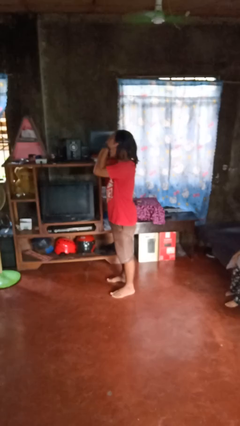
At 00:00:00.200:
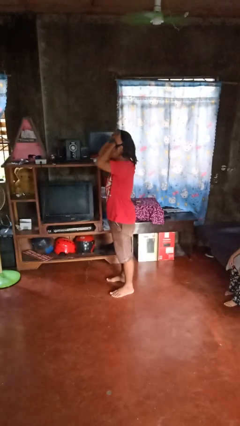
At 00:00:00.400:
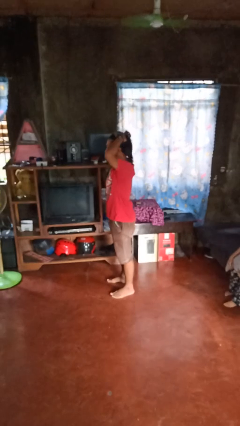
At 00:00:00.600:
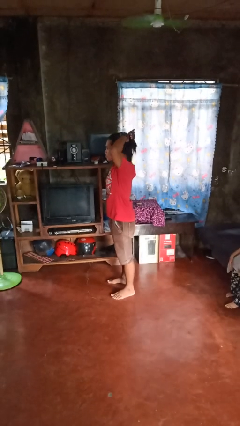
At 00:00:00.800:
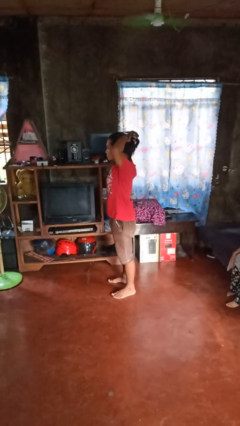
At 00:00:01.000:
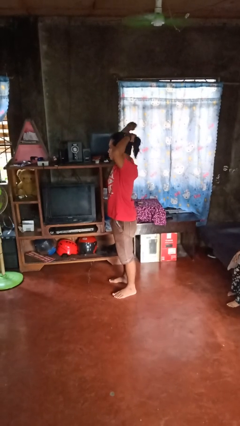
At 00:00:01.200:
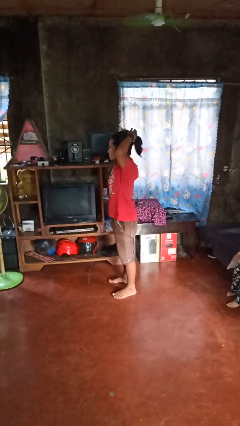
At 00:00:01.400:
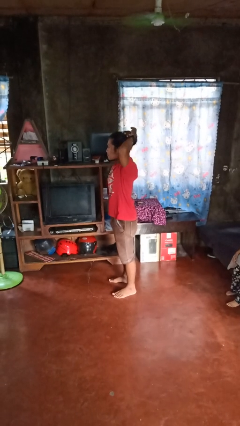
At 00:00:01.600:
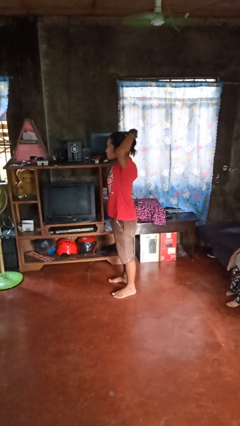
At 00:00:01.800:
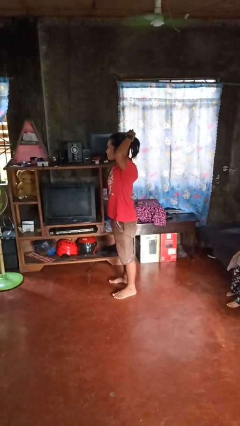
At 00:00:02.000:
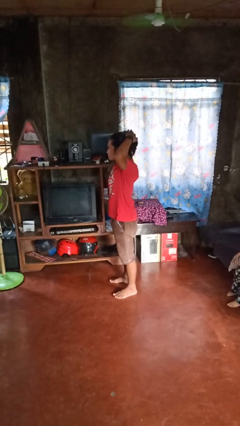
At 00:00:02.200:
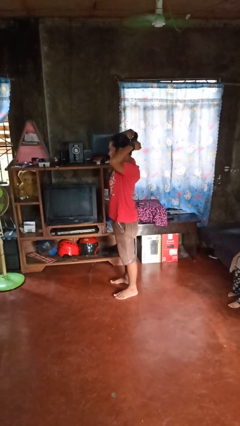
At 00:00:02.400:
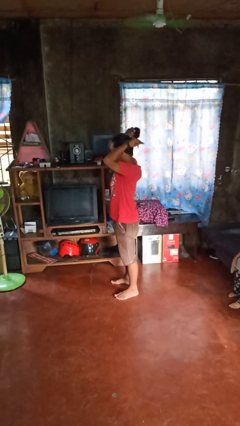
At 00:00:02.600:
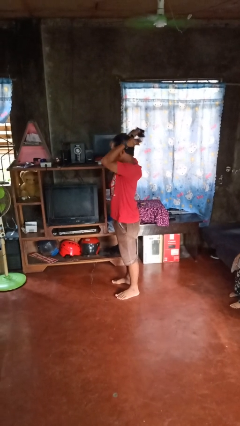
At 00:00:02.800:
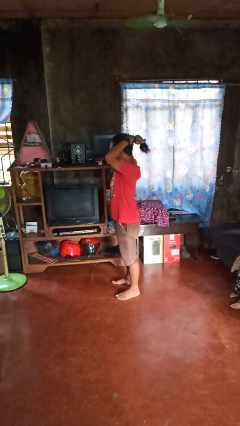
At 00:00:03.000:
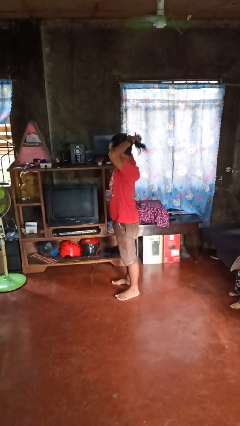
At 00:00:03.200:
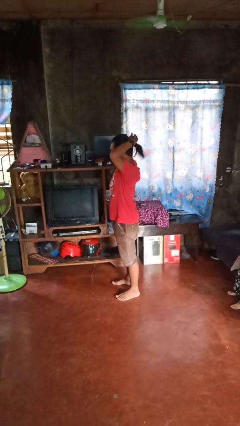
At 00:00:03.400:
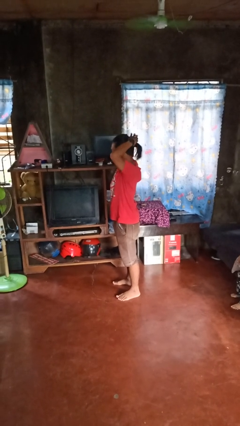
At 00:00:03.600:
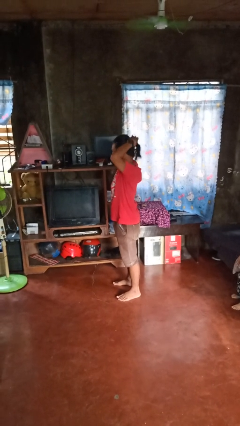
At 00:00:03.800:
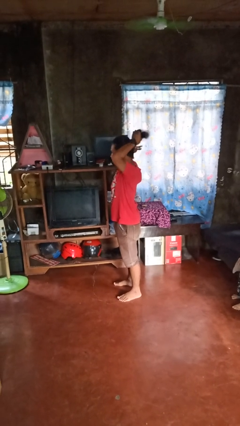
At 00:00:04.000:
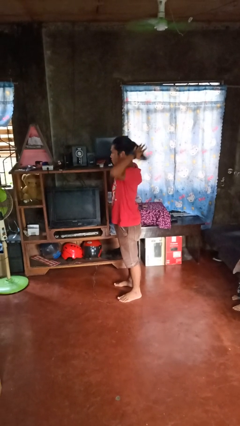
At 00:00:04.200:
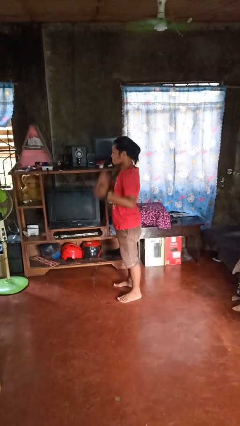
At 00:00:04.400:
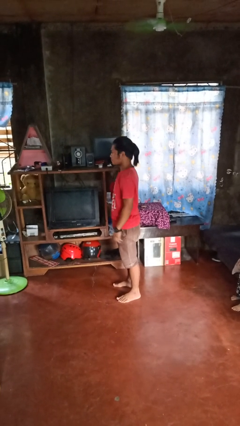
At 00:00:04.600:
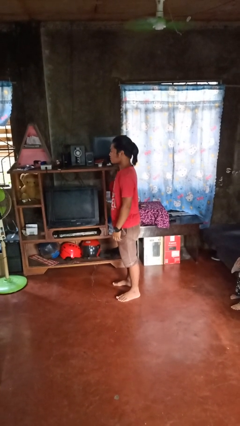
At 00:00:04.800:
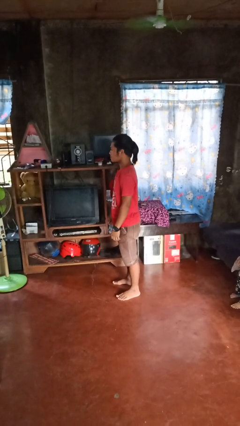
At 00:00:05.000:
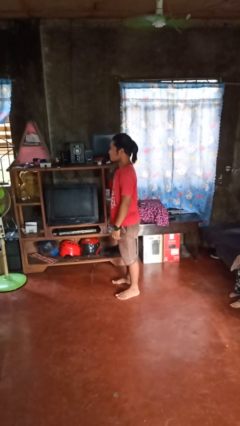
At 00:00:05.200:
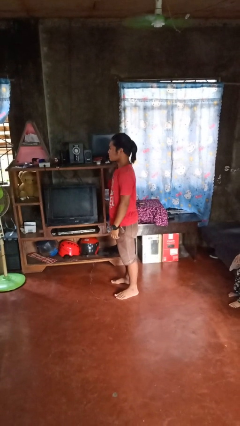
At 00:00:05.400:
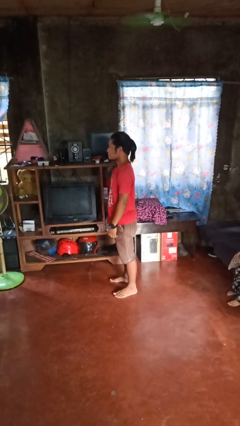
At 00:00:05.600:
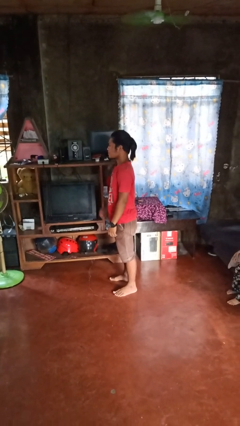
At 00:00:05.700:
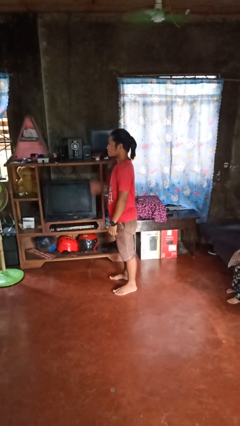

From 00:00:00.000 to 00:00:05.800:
person puts hair in ponytail

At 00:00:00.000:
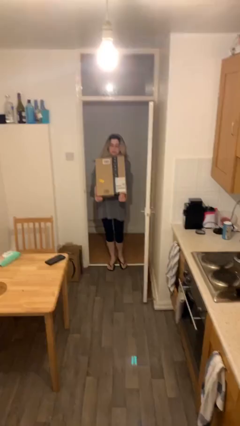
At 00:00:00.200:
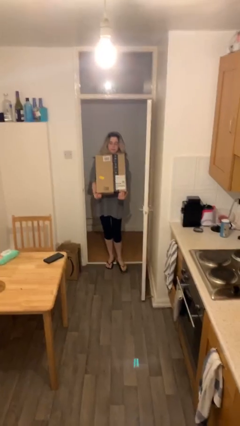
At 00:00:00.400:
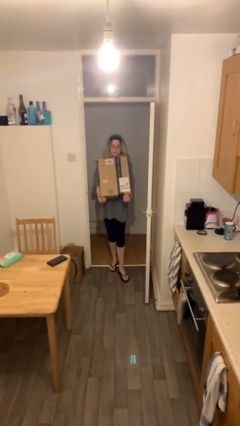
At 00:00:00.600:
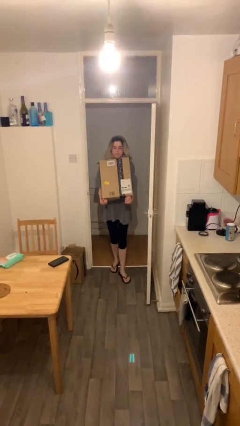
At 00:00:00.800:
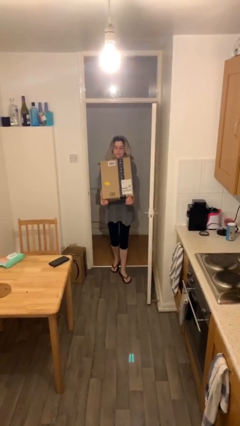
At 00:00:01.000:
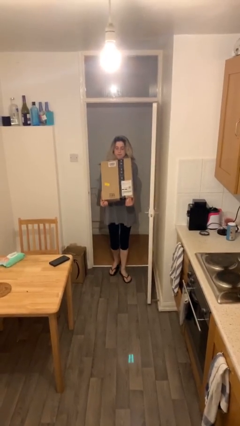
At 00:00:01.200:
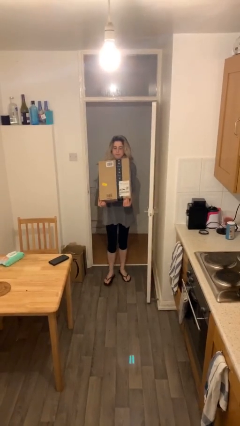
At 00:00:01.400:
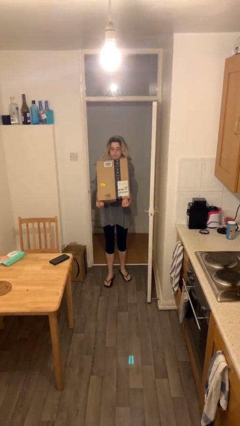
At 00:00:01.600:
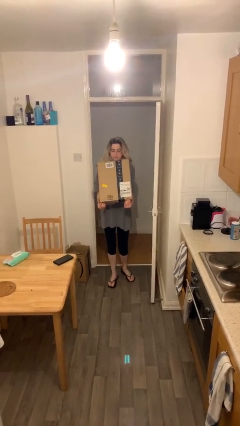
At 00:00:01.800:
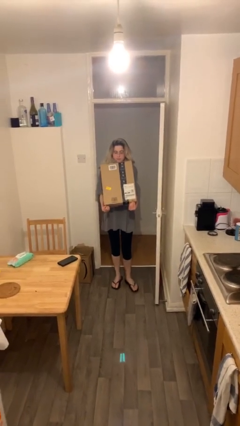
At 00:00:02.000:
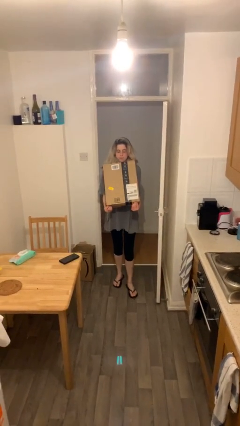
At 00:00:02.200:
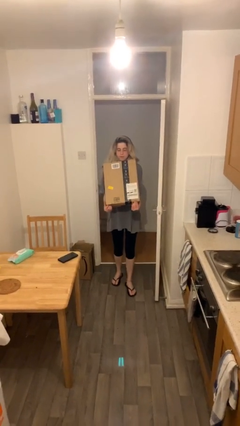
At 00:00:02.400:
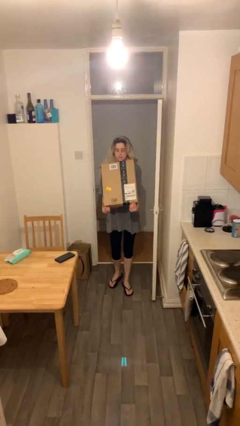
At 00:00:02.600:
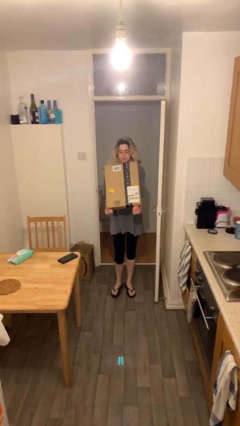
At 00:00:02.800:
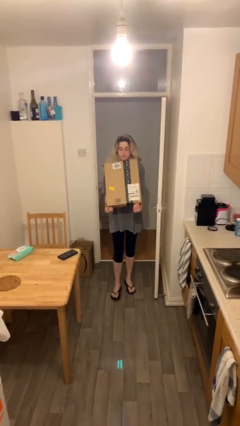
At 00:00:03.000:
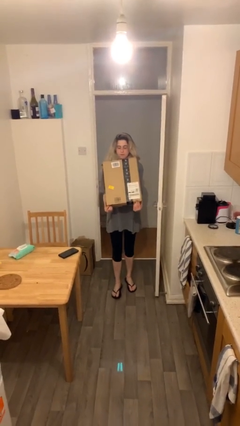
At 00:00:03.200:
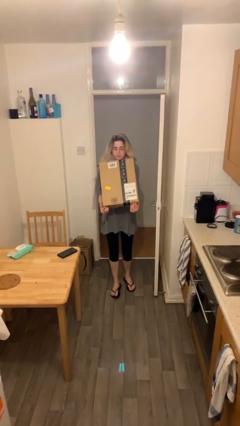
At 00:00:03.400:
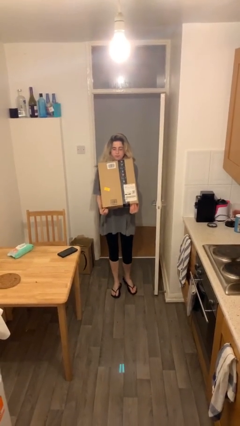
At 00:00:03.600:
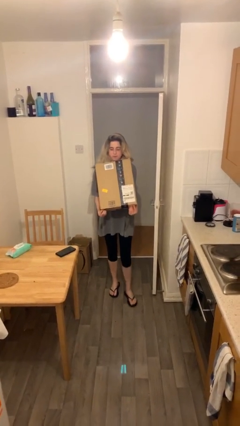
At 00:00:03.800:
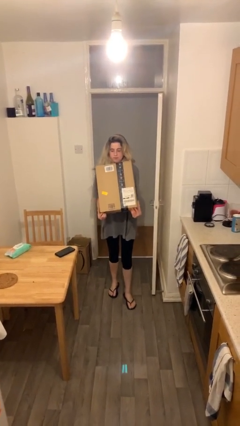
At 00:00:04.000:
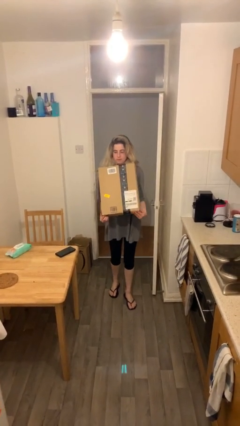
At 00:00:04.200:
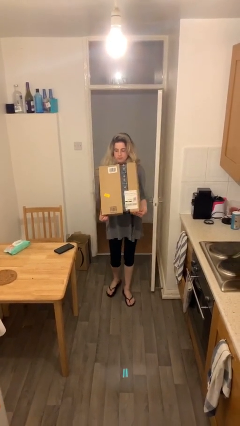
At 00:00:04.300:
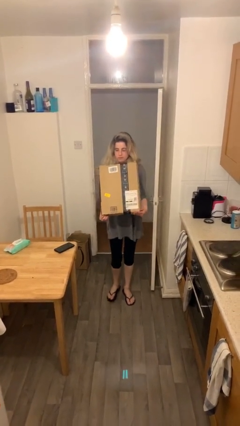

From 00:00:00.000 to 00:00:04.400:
person carries heavy object

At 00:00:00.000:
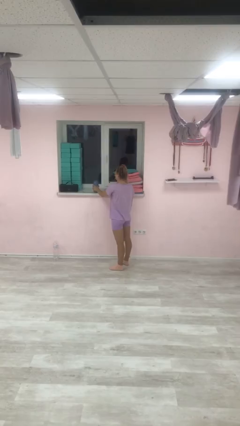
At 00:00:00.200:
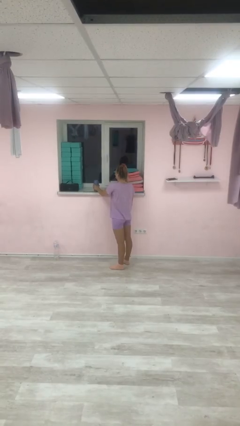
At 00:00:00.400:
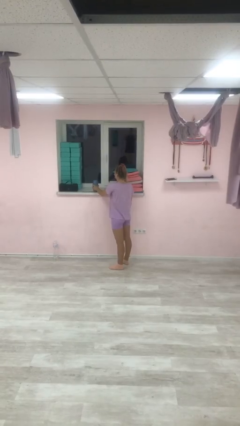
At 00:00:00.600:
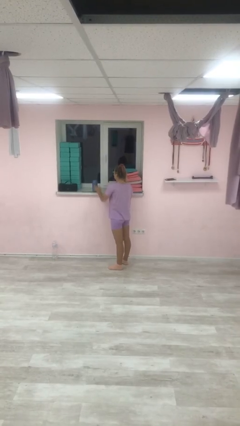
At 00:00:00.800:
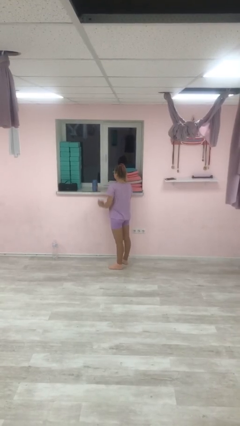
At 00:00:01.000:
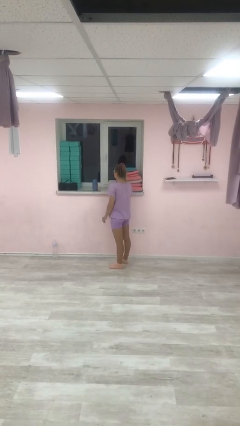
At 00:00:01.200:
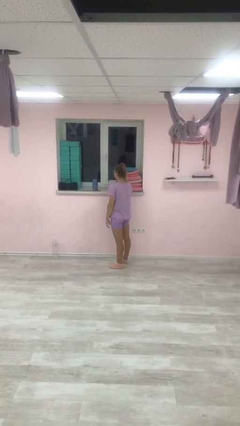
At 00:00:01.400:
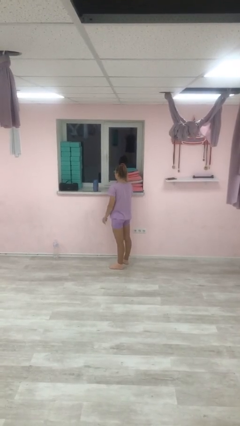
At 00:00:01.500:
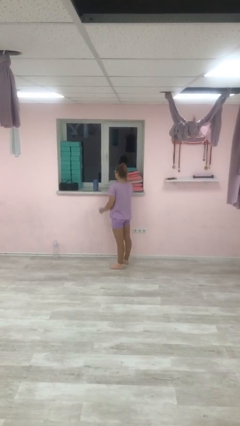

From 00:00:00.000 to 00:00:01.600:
person puts down object on countertop

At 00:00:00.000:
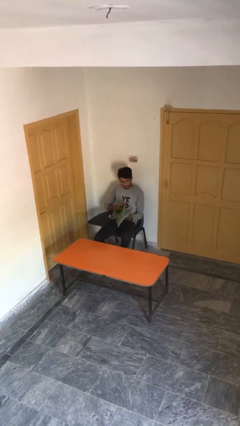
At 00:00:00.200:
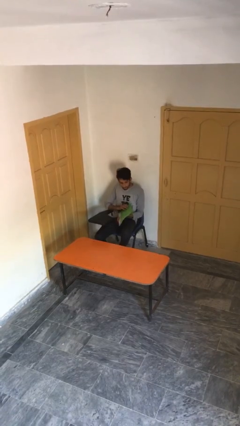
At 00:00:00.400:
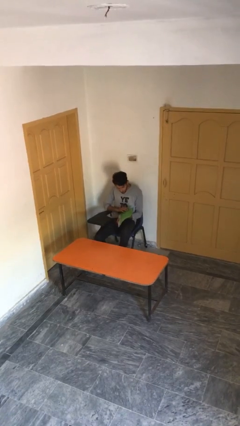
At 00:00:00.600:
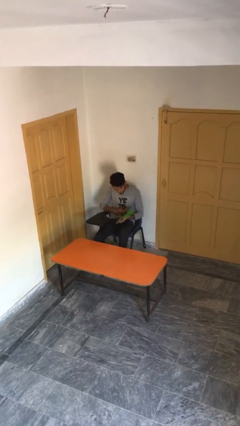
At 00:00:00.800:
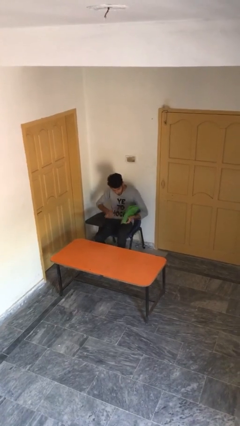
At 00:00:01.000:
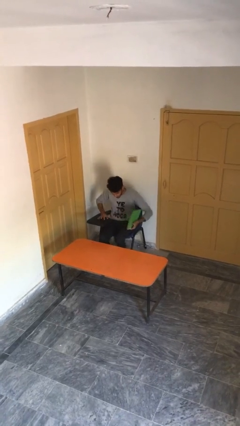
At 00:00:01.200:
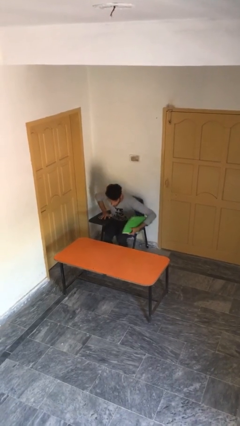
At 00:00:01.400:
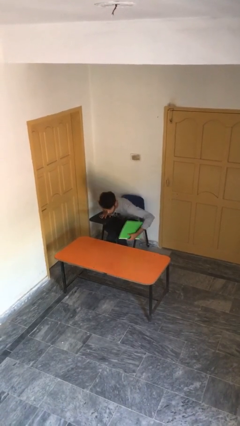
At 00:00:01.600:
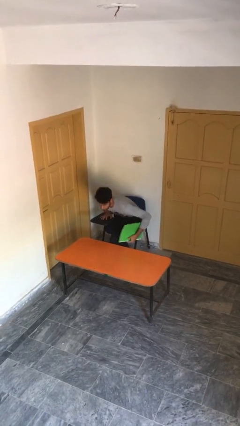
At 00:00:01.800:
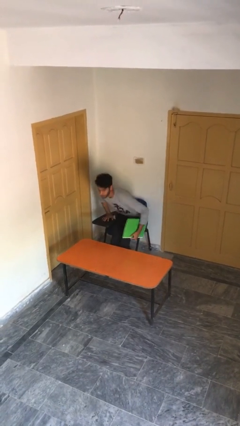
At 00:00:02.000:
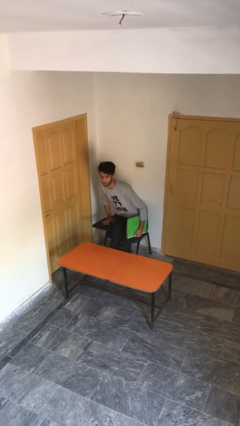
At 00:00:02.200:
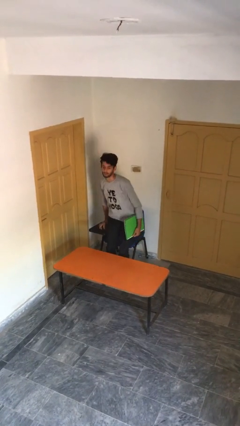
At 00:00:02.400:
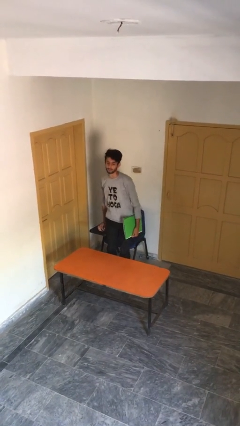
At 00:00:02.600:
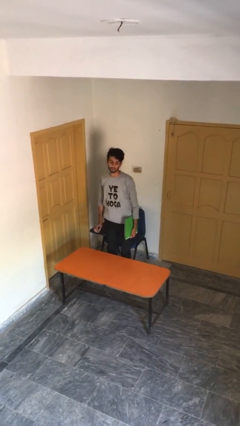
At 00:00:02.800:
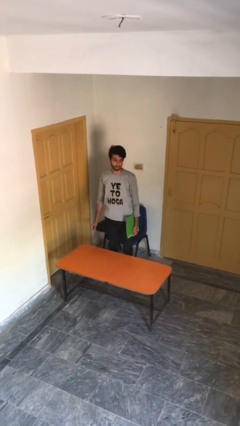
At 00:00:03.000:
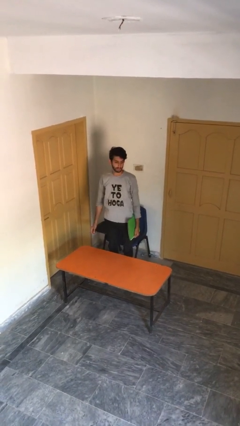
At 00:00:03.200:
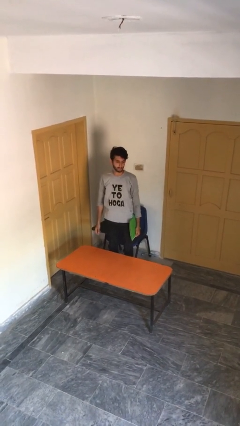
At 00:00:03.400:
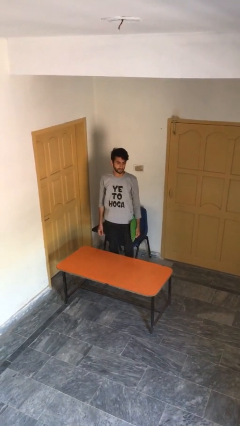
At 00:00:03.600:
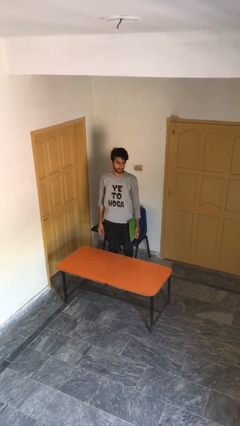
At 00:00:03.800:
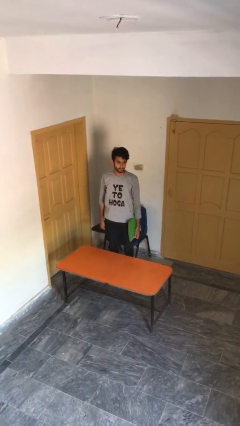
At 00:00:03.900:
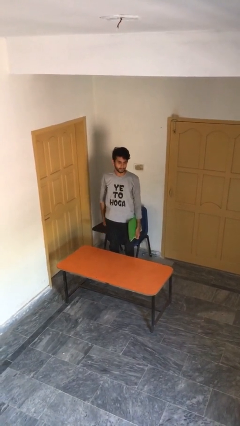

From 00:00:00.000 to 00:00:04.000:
person stands up

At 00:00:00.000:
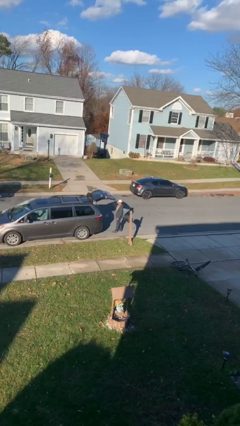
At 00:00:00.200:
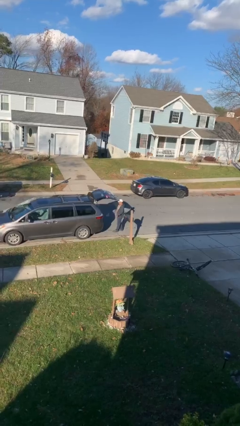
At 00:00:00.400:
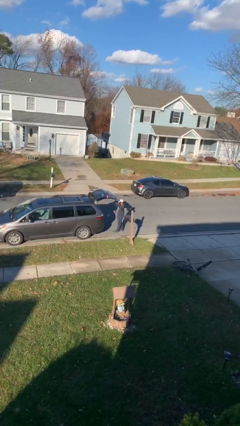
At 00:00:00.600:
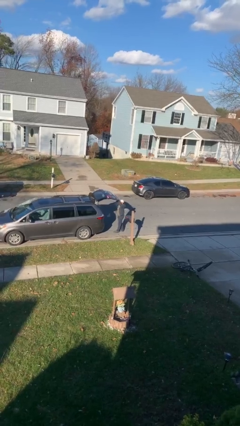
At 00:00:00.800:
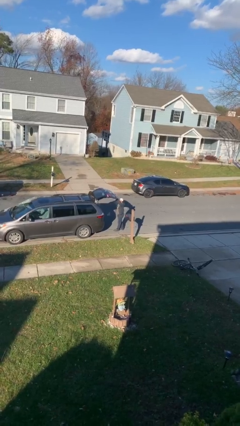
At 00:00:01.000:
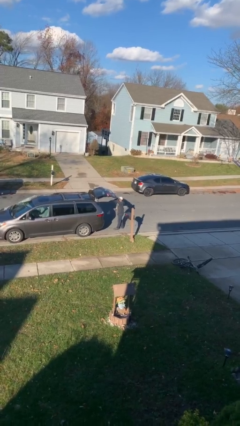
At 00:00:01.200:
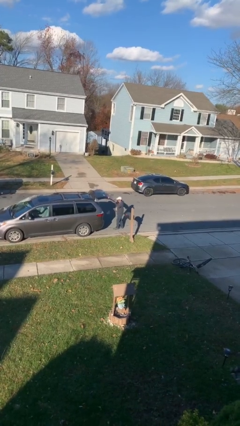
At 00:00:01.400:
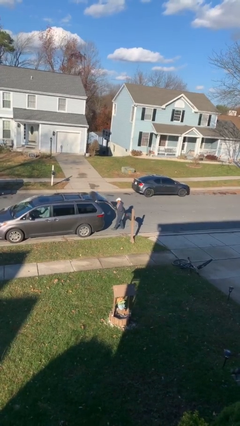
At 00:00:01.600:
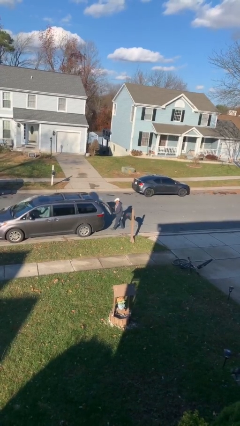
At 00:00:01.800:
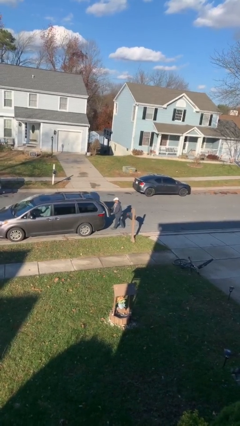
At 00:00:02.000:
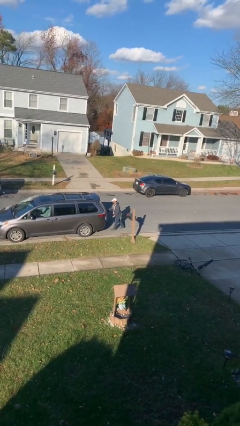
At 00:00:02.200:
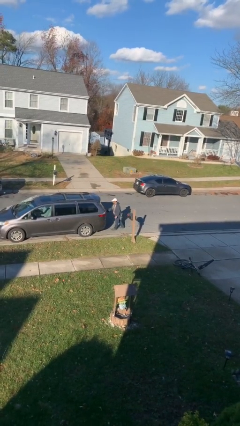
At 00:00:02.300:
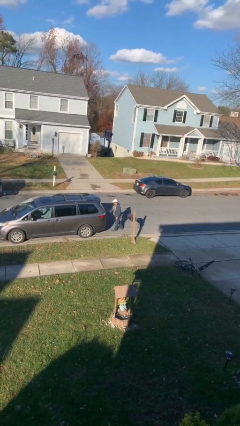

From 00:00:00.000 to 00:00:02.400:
person closes car trunk
